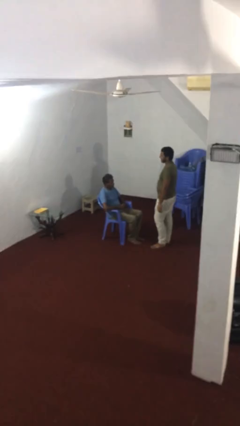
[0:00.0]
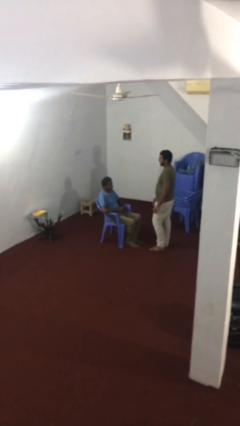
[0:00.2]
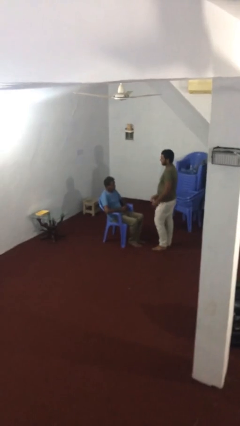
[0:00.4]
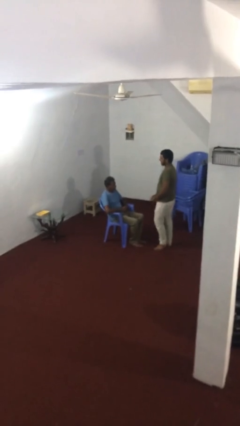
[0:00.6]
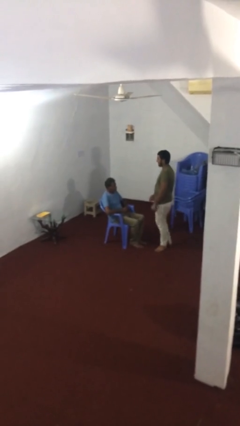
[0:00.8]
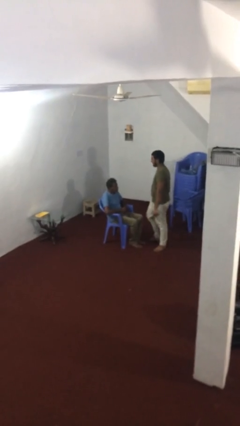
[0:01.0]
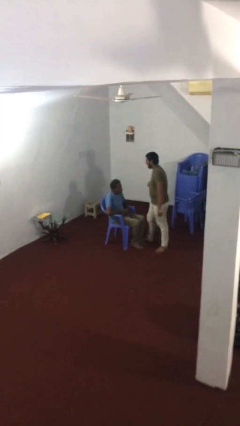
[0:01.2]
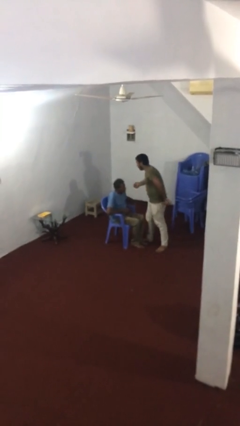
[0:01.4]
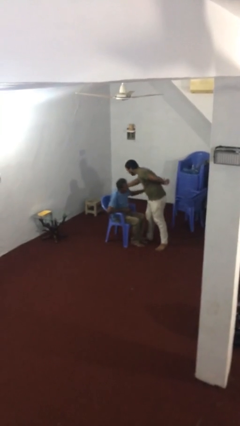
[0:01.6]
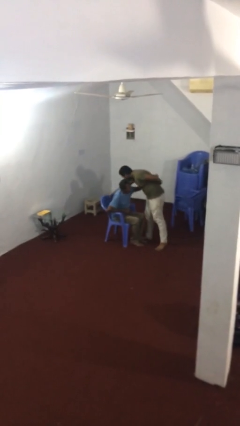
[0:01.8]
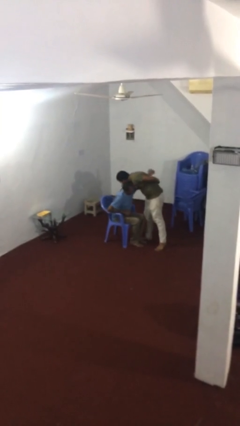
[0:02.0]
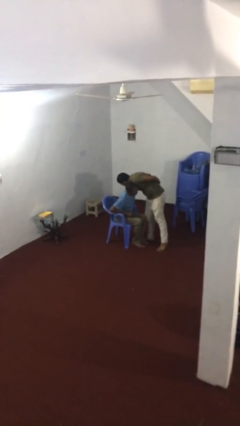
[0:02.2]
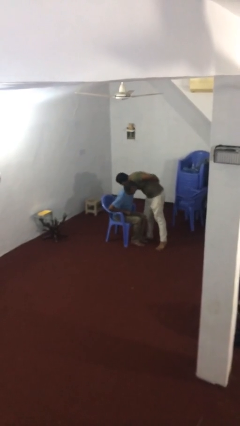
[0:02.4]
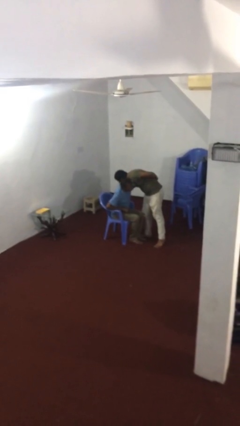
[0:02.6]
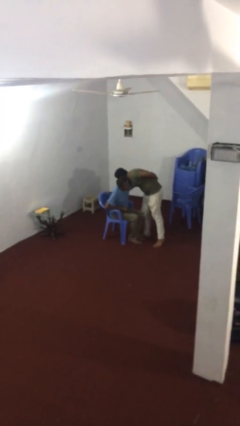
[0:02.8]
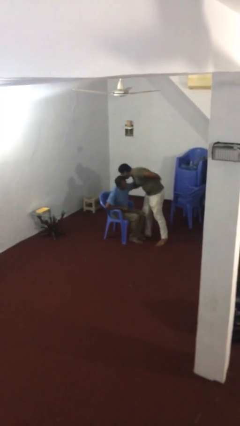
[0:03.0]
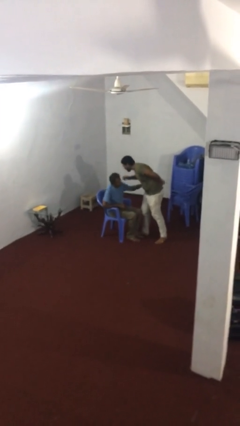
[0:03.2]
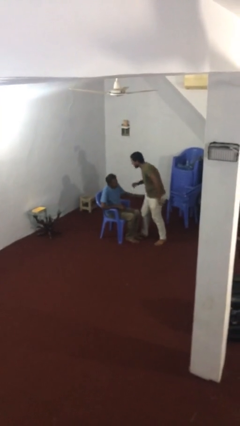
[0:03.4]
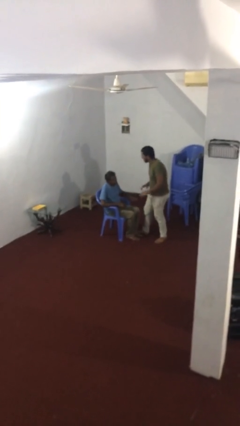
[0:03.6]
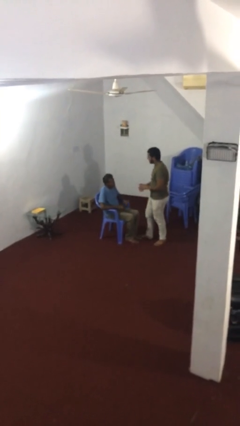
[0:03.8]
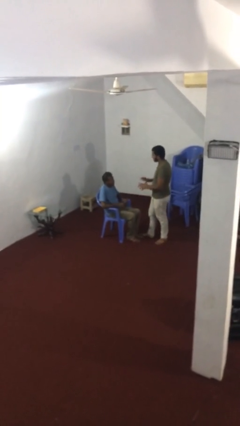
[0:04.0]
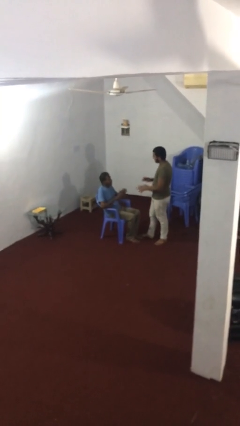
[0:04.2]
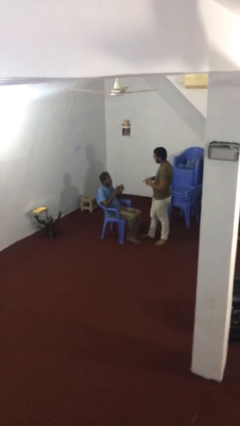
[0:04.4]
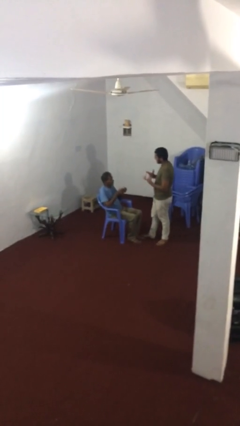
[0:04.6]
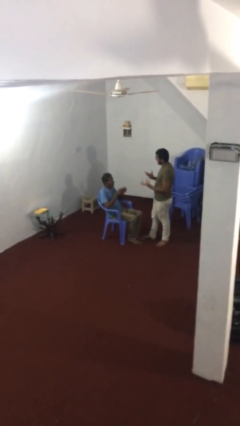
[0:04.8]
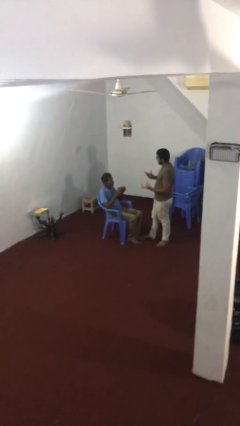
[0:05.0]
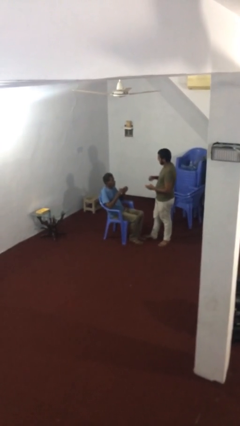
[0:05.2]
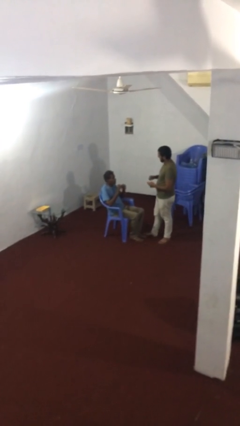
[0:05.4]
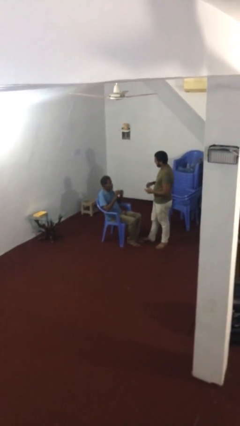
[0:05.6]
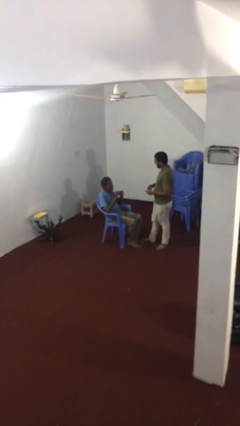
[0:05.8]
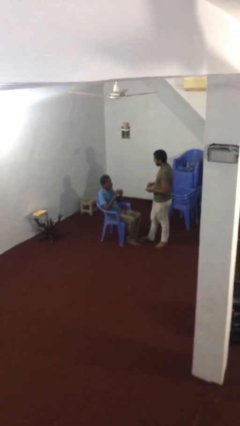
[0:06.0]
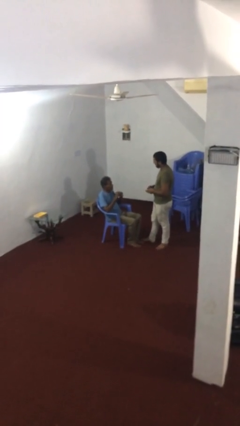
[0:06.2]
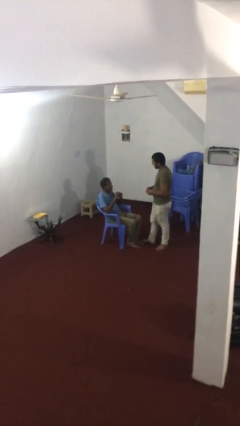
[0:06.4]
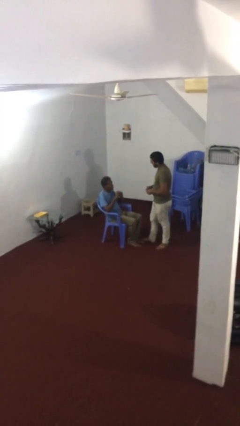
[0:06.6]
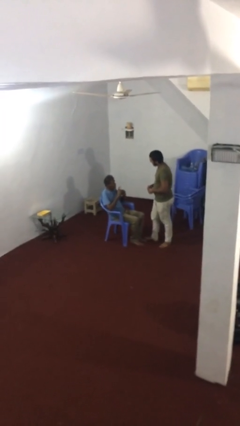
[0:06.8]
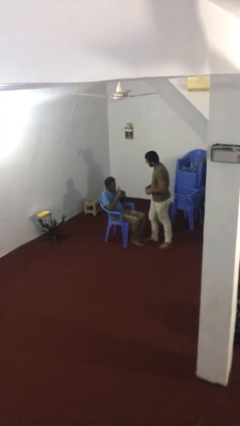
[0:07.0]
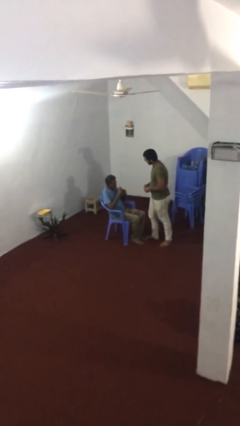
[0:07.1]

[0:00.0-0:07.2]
person embraces person

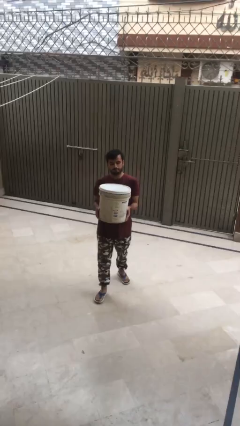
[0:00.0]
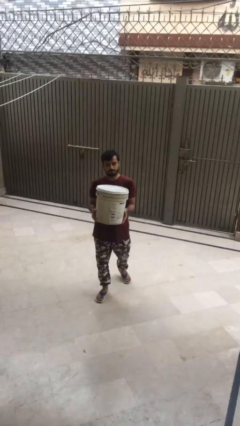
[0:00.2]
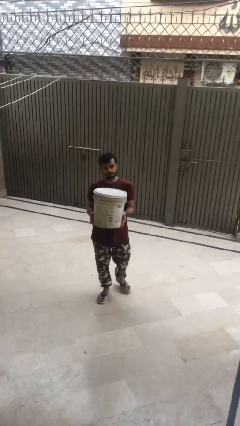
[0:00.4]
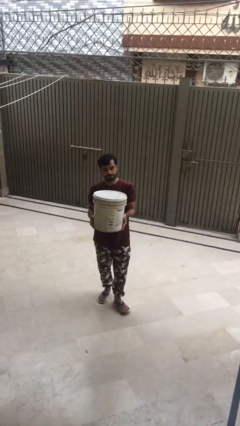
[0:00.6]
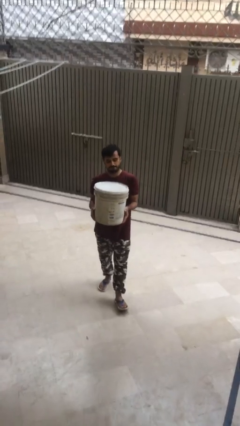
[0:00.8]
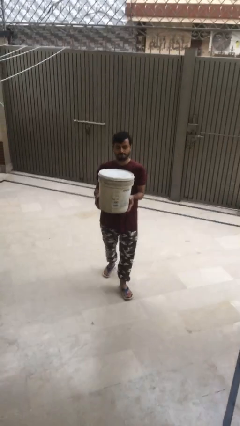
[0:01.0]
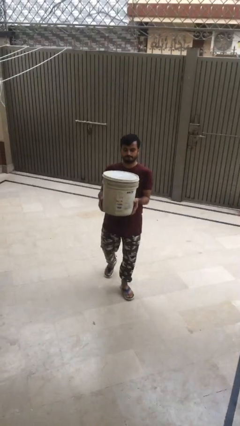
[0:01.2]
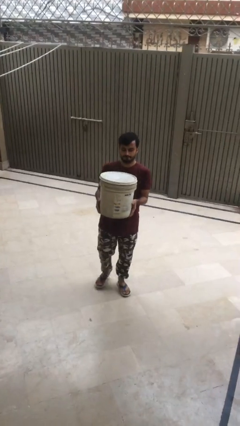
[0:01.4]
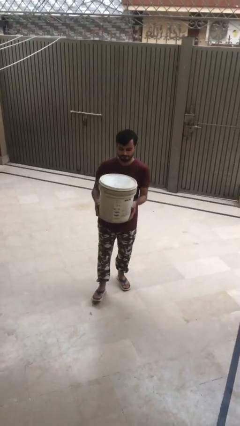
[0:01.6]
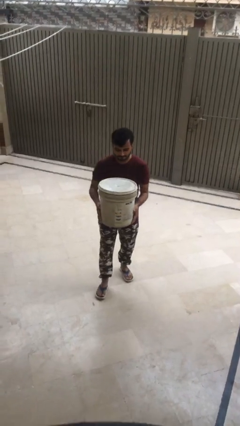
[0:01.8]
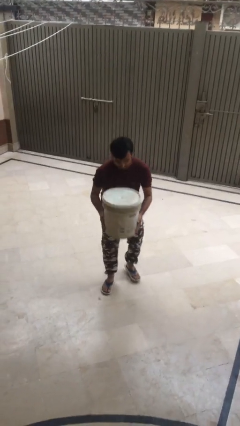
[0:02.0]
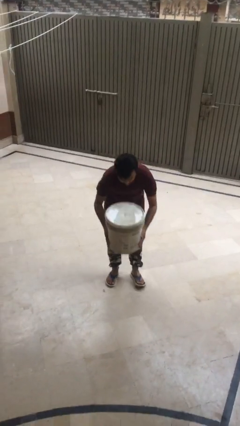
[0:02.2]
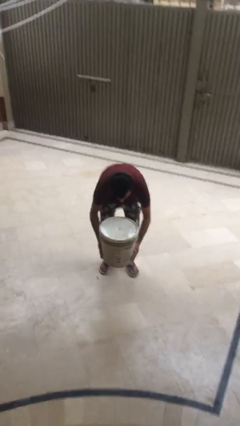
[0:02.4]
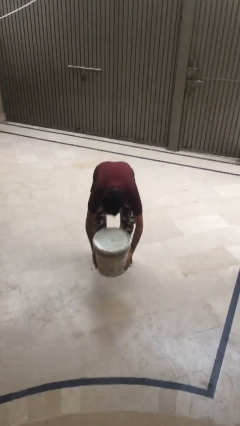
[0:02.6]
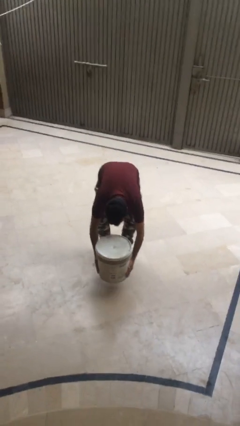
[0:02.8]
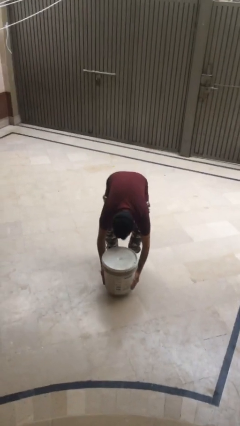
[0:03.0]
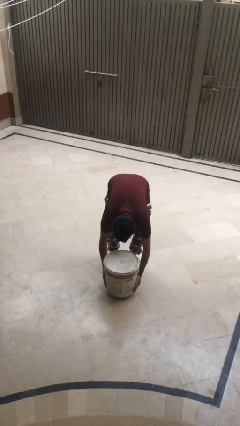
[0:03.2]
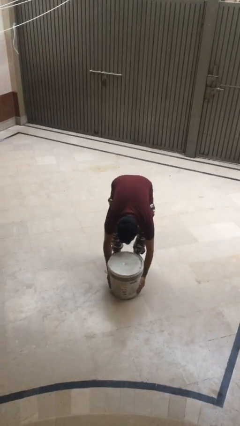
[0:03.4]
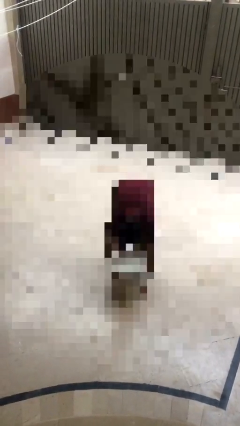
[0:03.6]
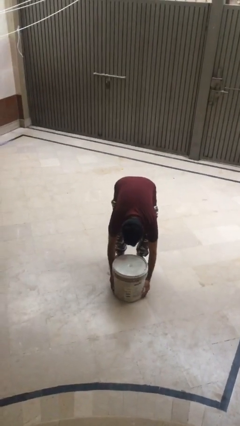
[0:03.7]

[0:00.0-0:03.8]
person puts down object on floor

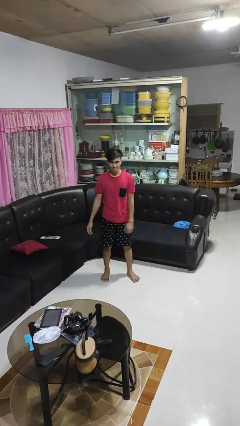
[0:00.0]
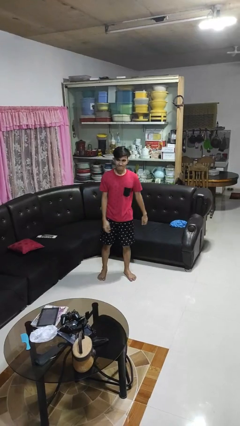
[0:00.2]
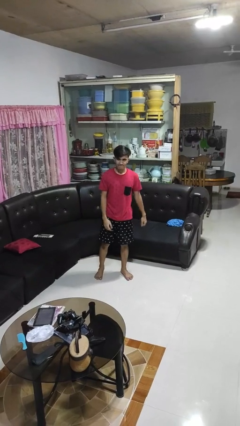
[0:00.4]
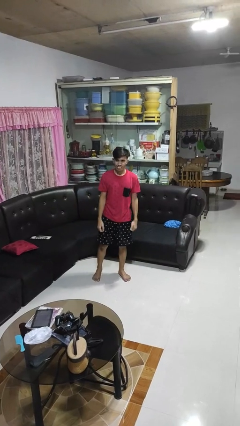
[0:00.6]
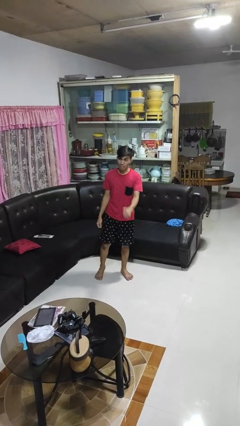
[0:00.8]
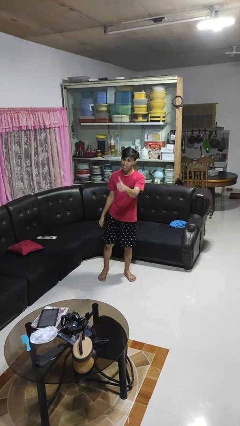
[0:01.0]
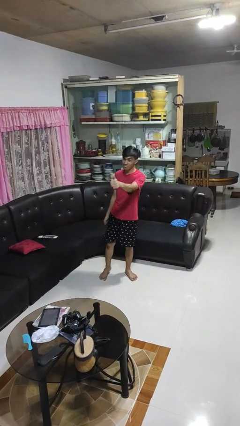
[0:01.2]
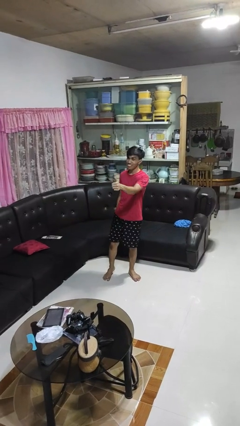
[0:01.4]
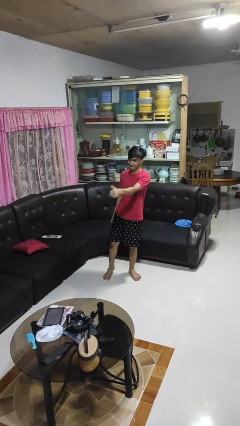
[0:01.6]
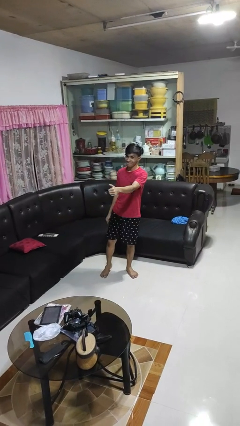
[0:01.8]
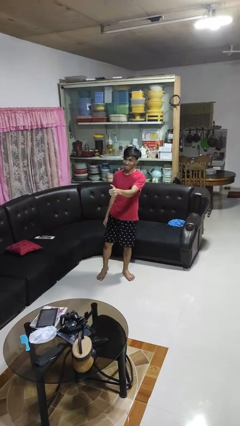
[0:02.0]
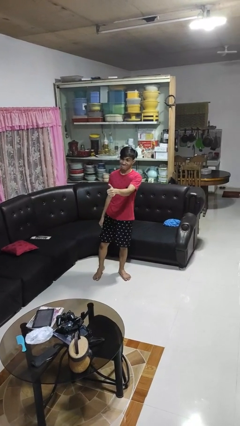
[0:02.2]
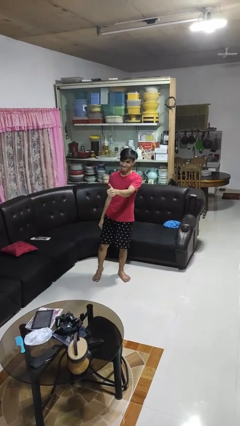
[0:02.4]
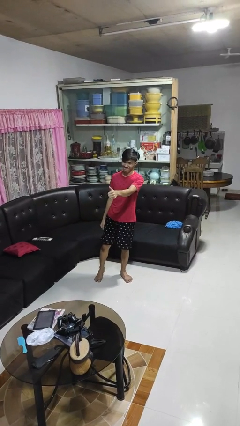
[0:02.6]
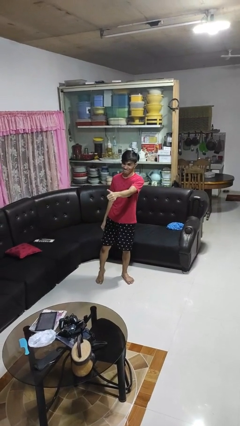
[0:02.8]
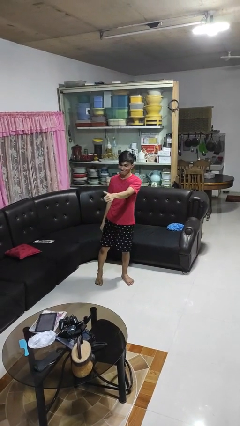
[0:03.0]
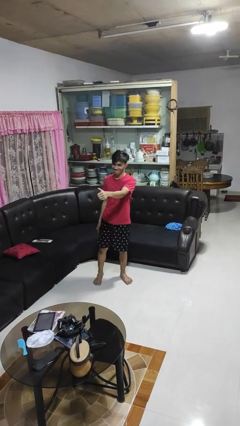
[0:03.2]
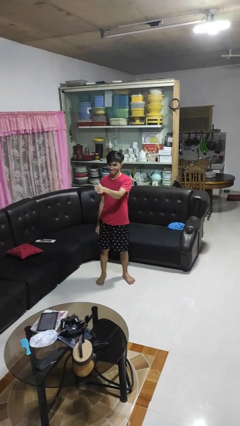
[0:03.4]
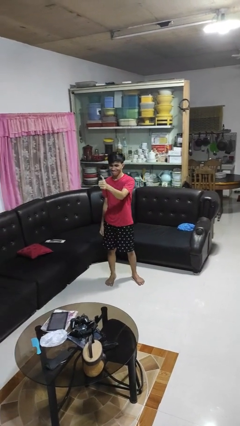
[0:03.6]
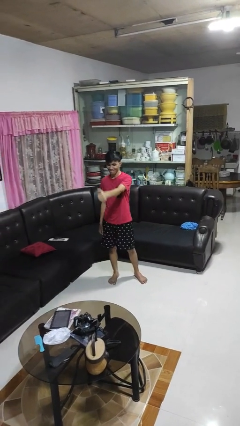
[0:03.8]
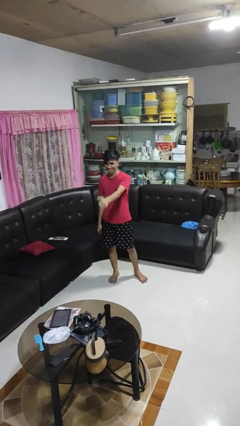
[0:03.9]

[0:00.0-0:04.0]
person gestures thumbs up

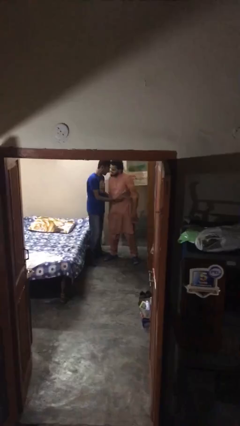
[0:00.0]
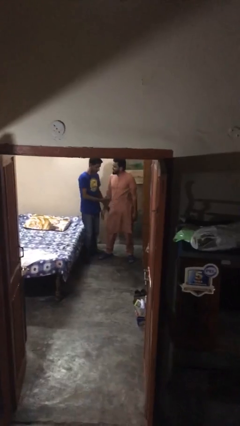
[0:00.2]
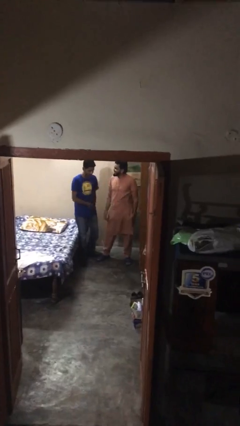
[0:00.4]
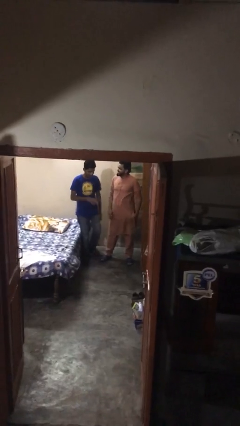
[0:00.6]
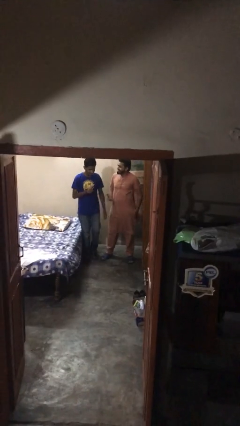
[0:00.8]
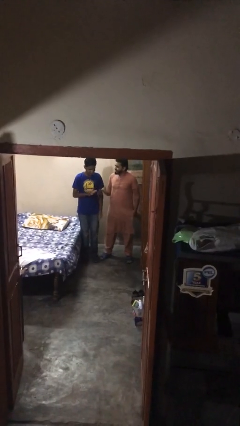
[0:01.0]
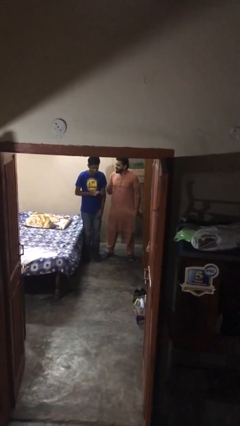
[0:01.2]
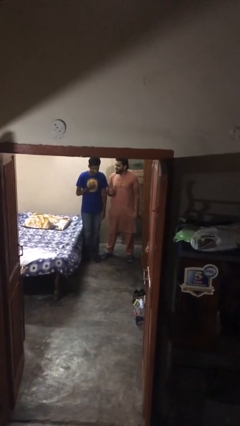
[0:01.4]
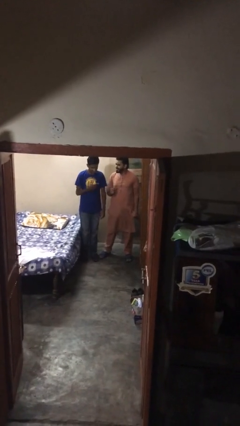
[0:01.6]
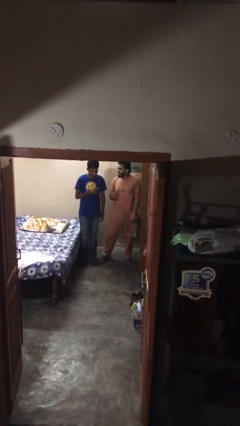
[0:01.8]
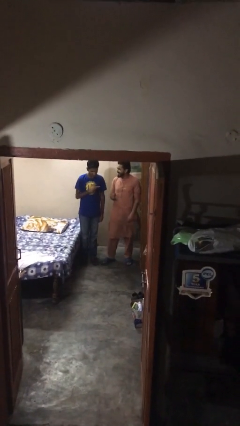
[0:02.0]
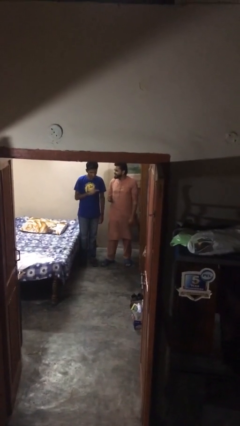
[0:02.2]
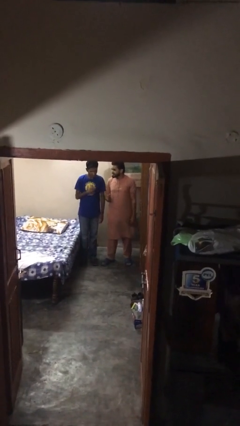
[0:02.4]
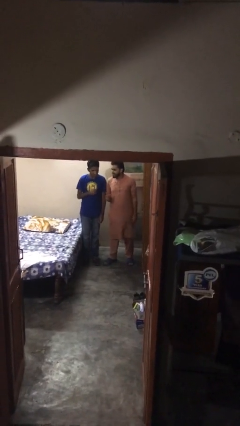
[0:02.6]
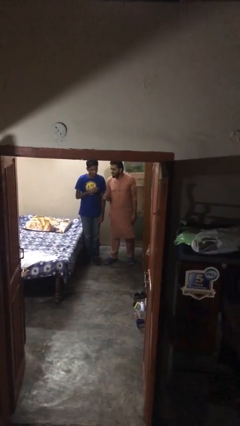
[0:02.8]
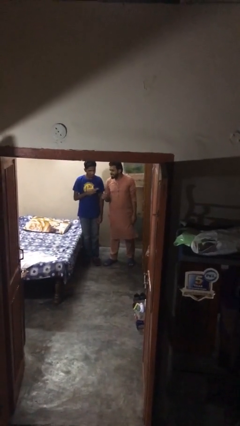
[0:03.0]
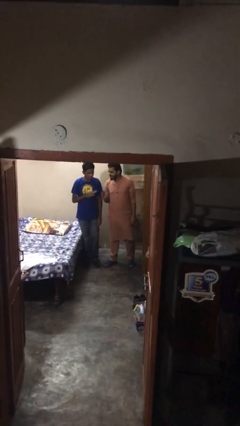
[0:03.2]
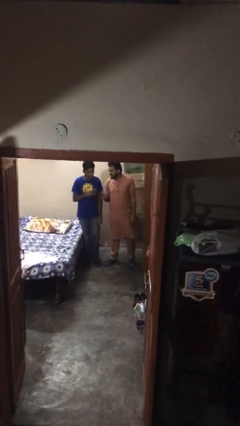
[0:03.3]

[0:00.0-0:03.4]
person talks to person
